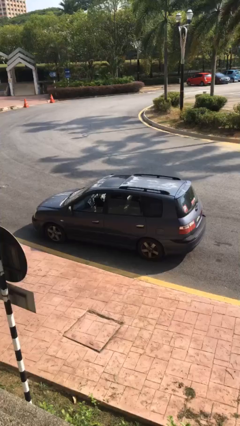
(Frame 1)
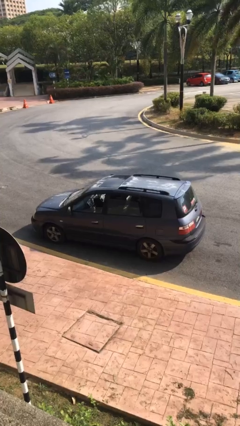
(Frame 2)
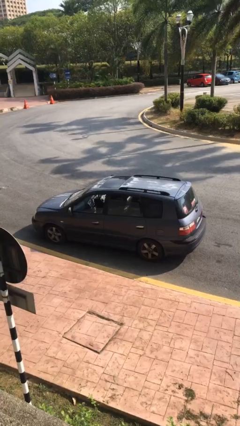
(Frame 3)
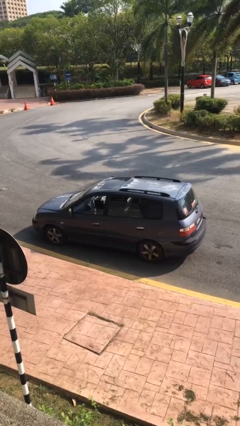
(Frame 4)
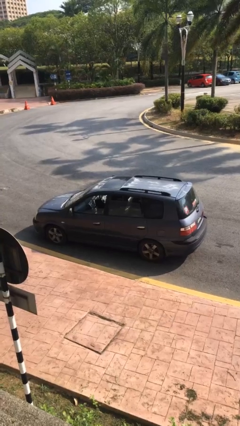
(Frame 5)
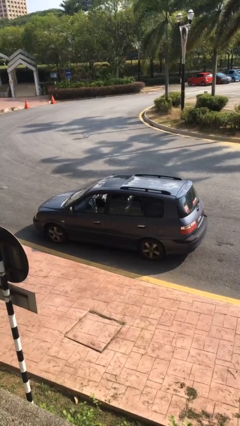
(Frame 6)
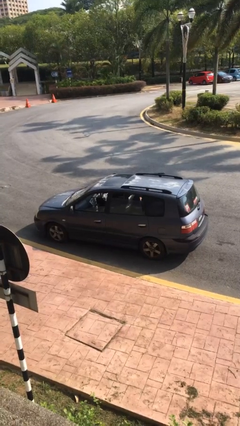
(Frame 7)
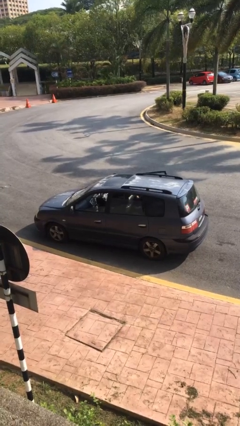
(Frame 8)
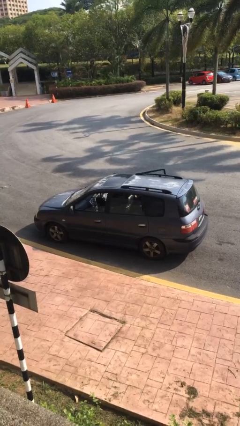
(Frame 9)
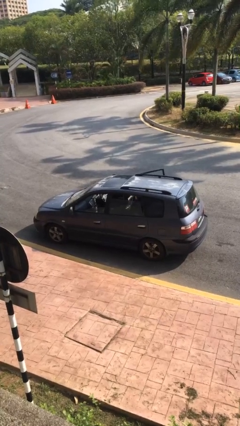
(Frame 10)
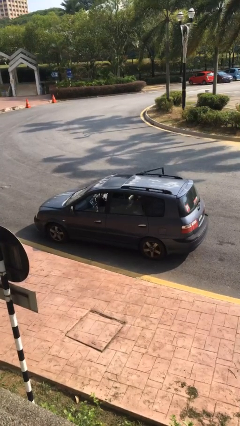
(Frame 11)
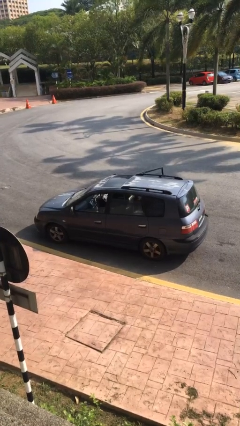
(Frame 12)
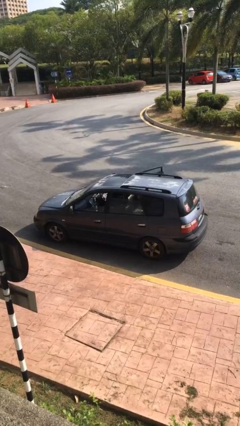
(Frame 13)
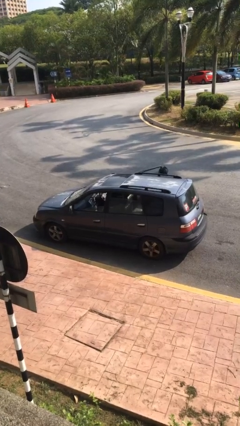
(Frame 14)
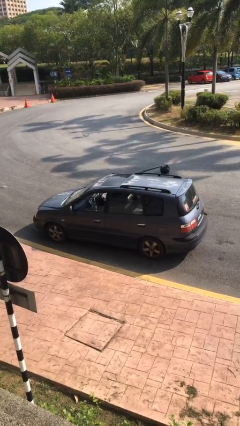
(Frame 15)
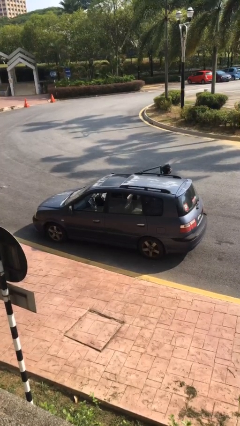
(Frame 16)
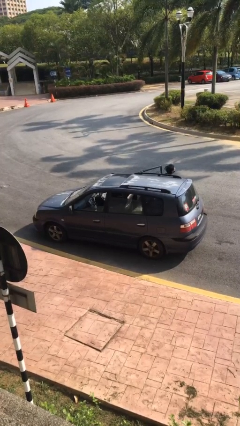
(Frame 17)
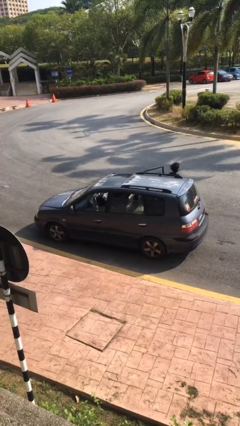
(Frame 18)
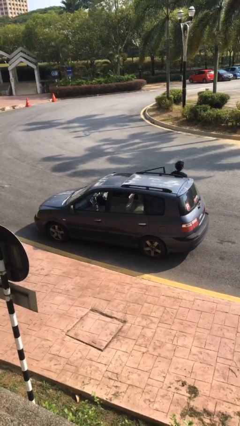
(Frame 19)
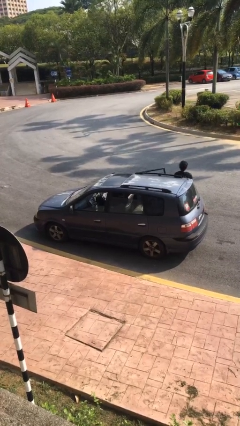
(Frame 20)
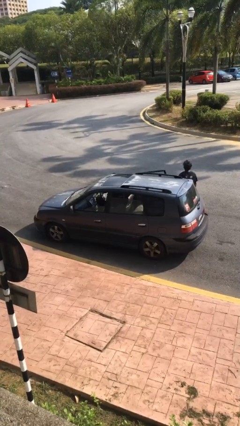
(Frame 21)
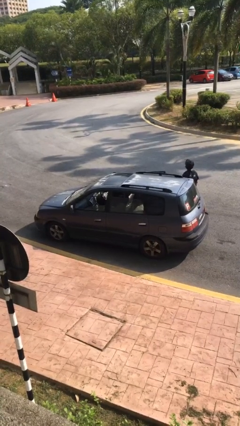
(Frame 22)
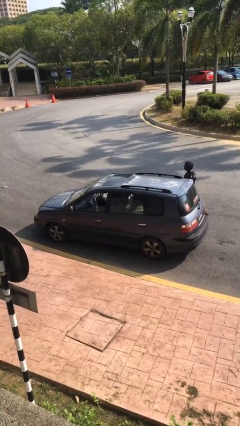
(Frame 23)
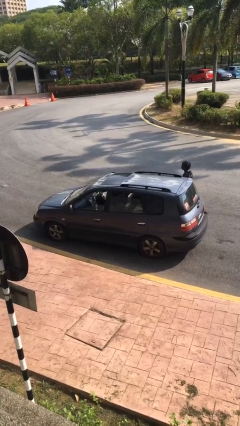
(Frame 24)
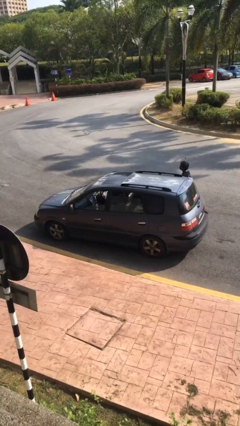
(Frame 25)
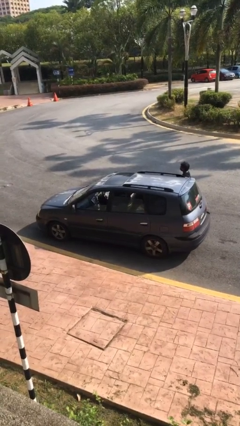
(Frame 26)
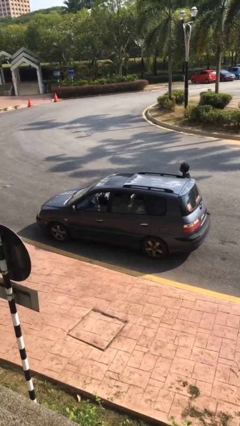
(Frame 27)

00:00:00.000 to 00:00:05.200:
car drops off person

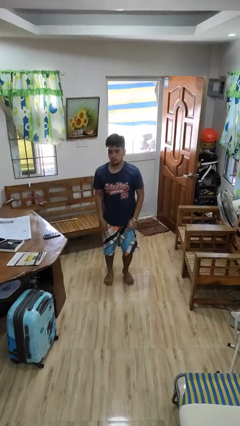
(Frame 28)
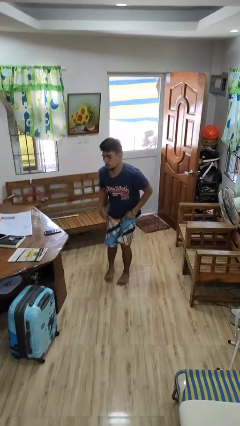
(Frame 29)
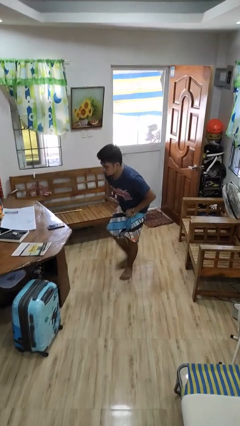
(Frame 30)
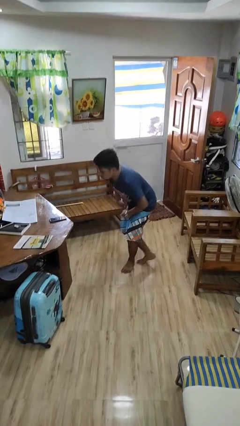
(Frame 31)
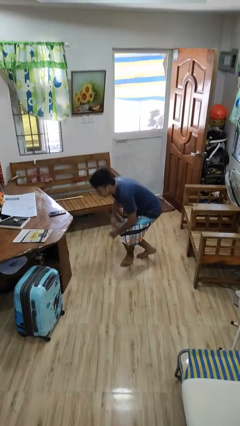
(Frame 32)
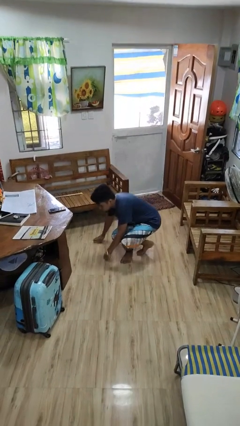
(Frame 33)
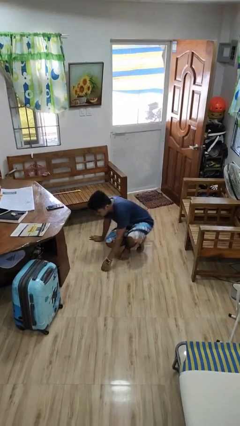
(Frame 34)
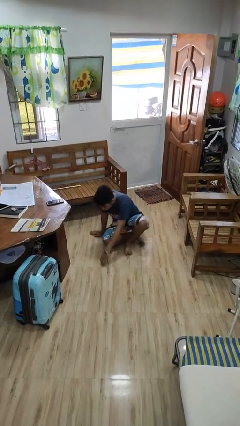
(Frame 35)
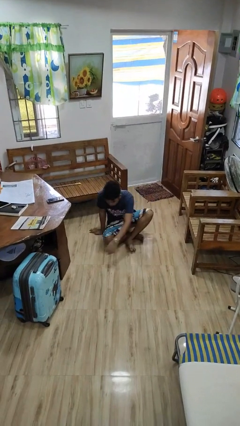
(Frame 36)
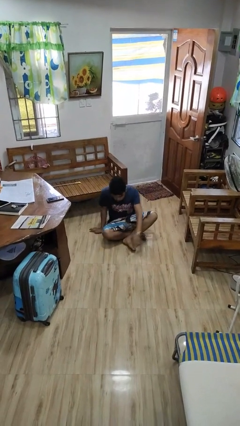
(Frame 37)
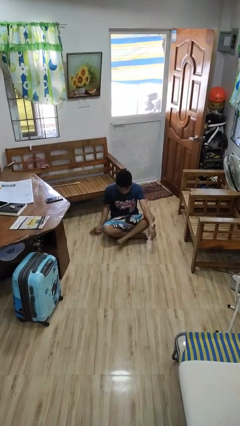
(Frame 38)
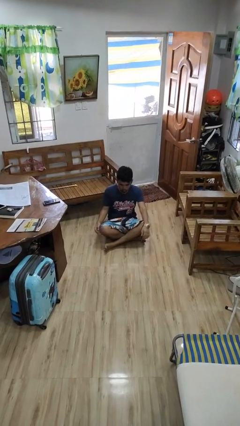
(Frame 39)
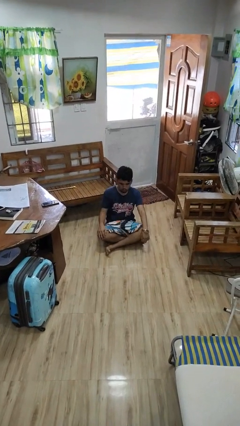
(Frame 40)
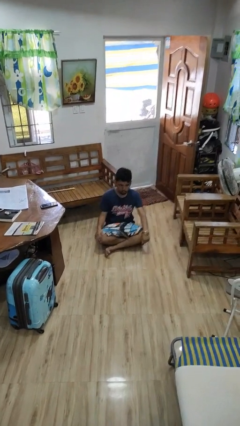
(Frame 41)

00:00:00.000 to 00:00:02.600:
person sits crisscross

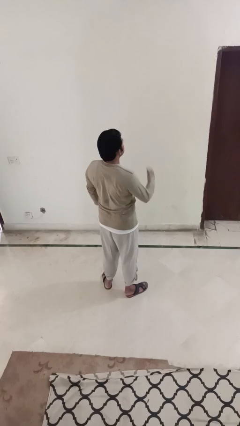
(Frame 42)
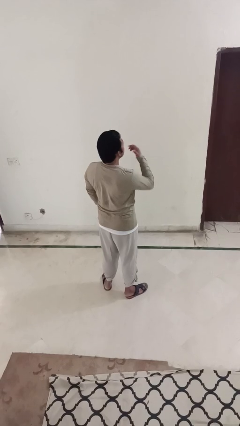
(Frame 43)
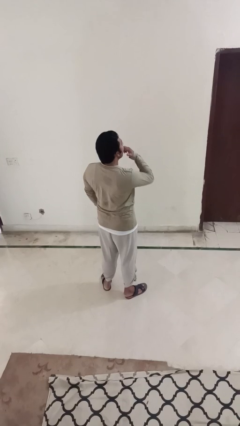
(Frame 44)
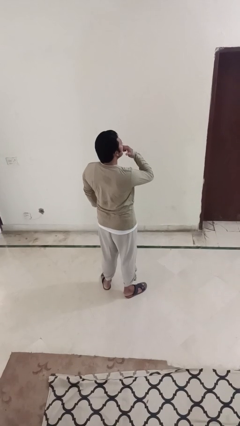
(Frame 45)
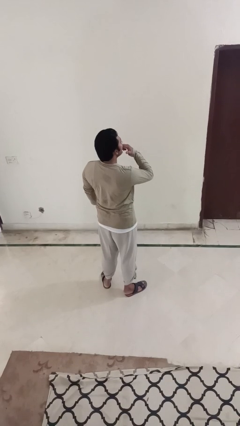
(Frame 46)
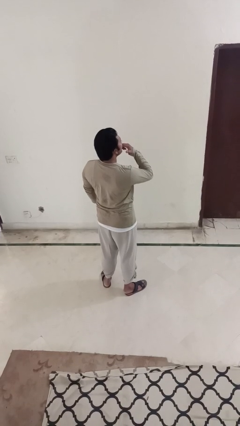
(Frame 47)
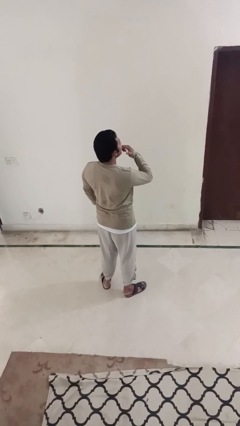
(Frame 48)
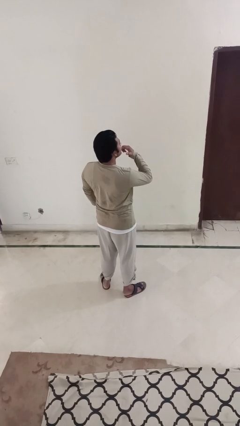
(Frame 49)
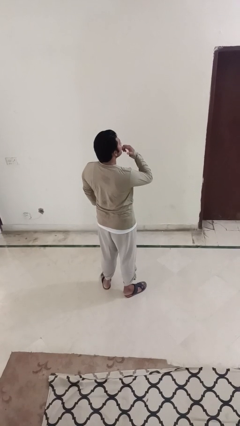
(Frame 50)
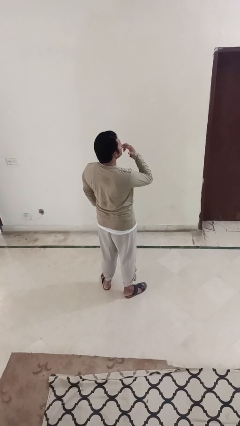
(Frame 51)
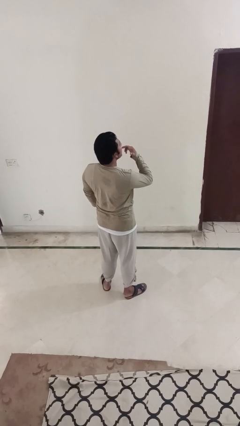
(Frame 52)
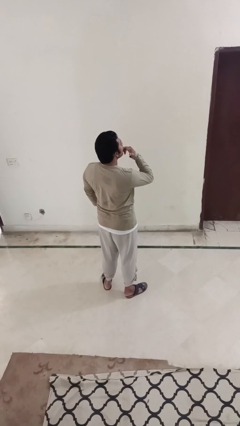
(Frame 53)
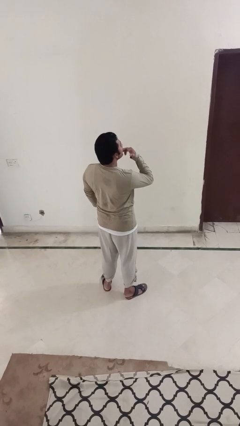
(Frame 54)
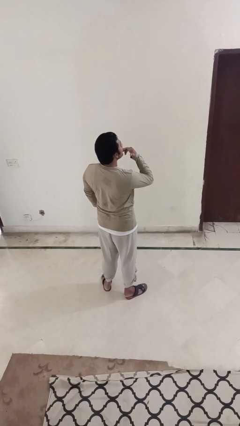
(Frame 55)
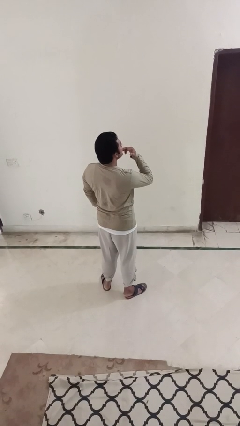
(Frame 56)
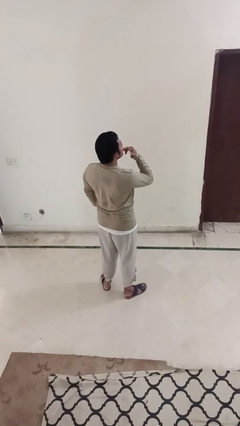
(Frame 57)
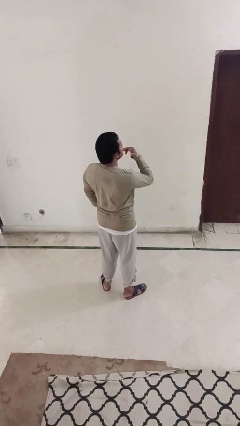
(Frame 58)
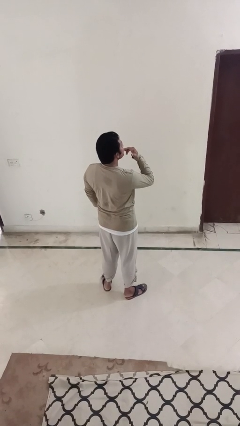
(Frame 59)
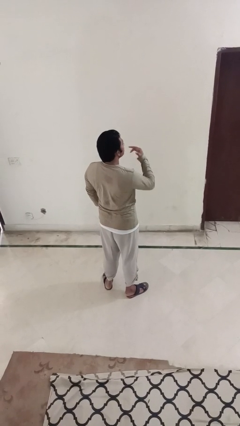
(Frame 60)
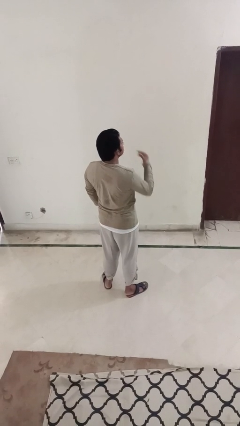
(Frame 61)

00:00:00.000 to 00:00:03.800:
person licks fingers

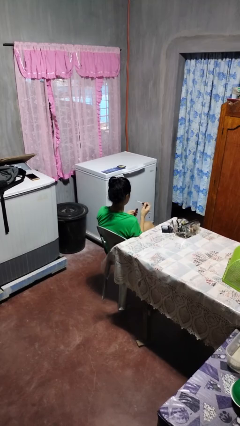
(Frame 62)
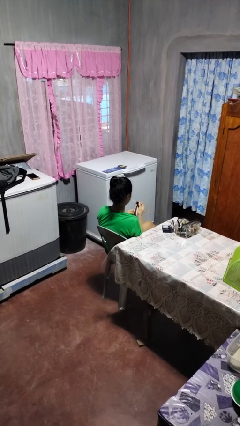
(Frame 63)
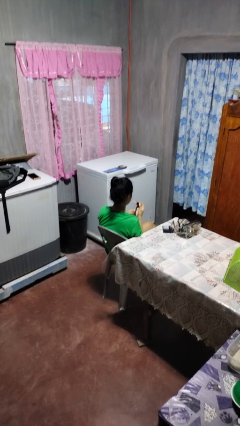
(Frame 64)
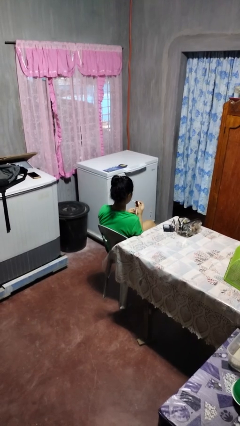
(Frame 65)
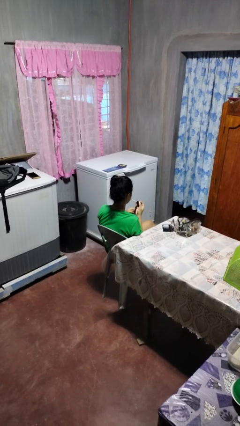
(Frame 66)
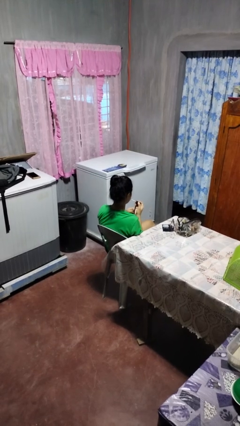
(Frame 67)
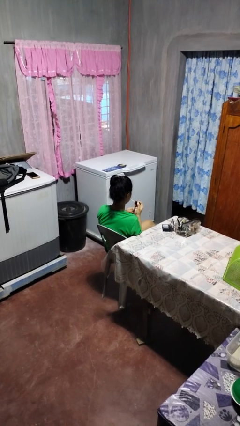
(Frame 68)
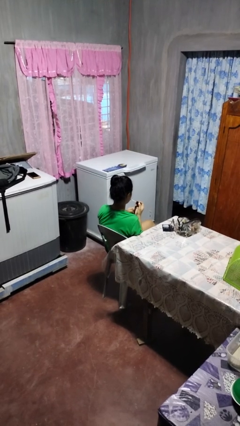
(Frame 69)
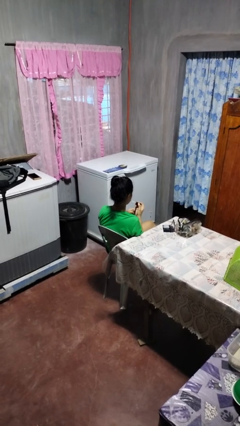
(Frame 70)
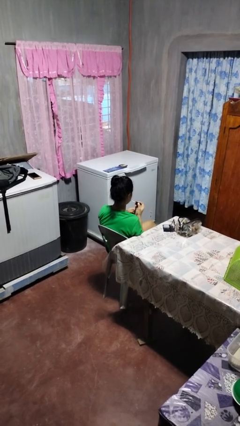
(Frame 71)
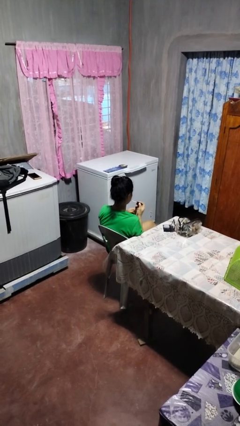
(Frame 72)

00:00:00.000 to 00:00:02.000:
person applies lip makeup

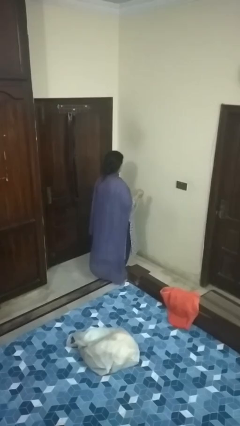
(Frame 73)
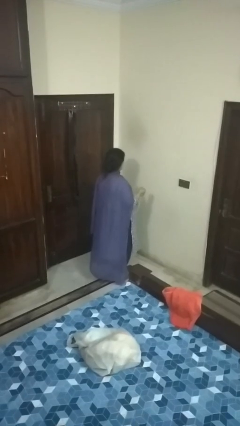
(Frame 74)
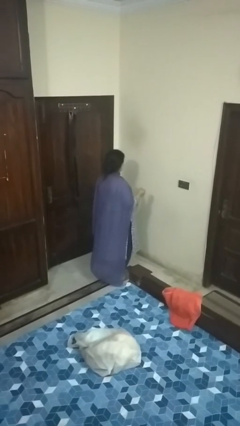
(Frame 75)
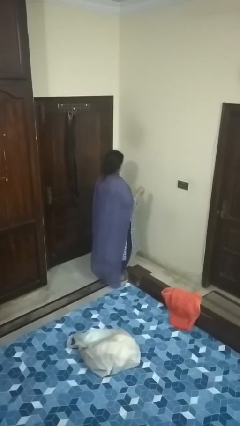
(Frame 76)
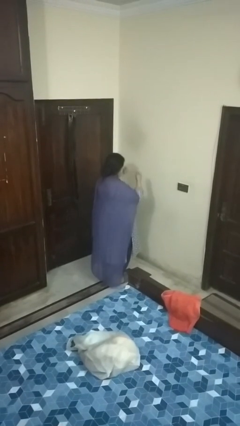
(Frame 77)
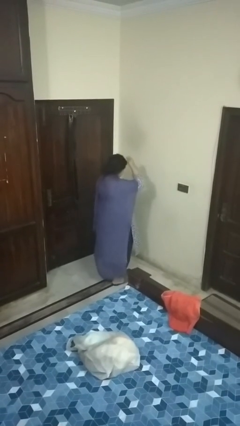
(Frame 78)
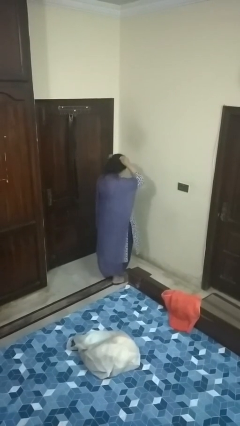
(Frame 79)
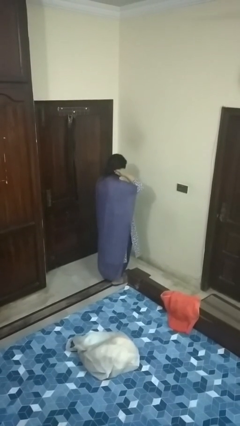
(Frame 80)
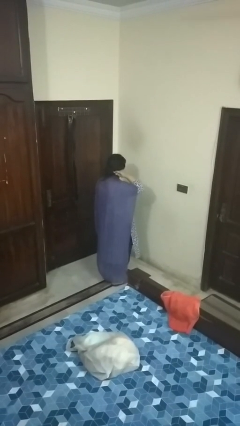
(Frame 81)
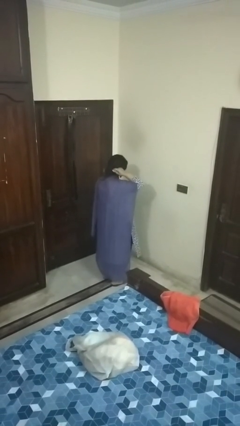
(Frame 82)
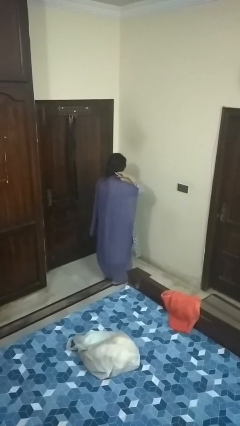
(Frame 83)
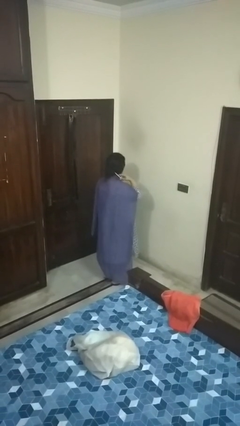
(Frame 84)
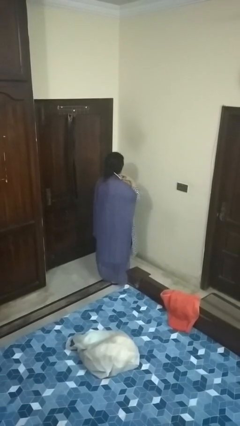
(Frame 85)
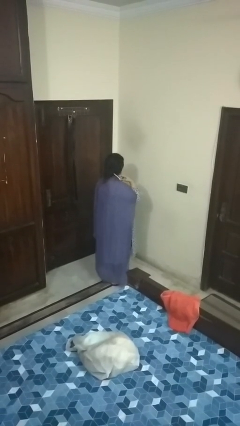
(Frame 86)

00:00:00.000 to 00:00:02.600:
person puts on necklace

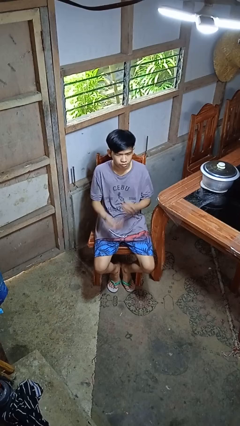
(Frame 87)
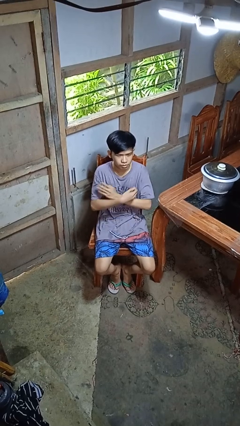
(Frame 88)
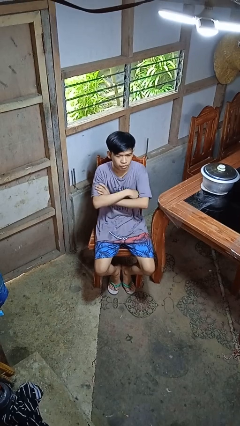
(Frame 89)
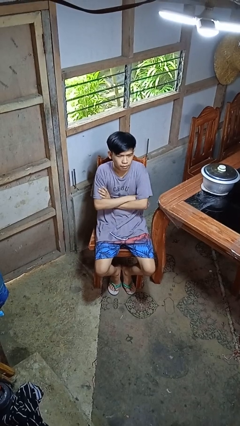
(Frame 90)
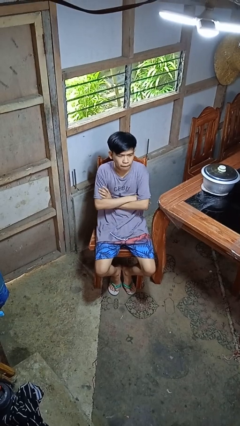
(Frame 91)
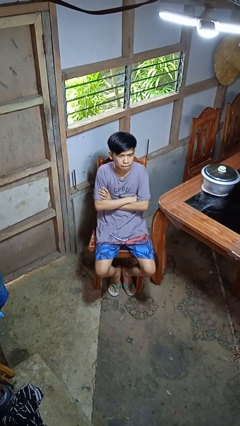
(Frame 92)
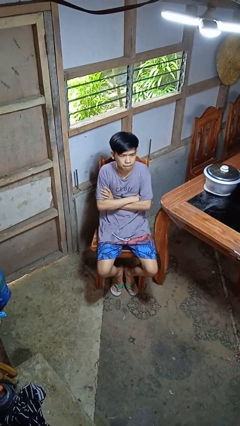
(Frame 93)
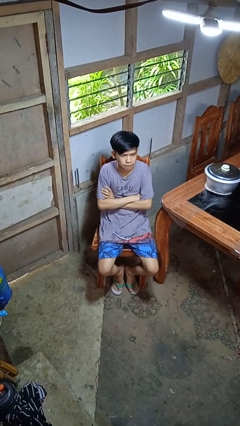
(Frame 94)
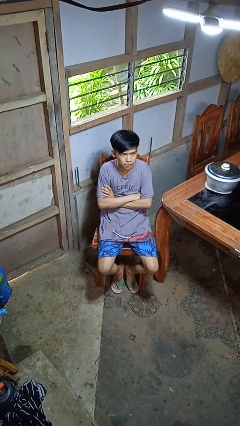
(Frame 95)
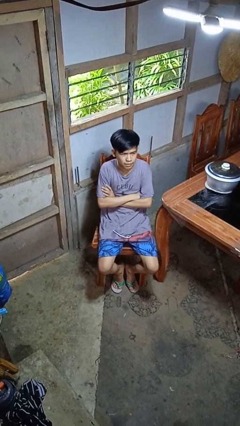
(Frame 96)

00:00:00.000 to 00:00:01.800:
person crosses arms
